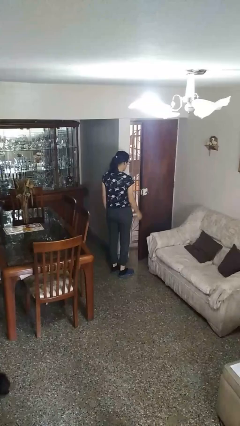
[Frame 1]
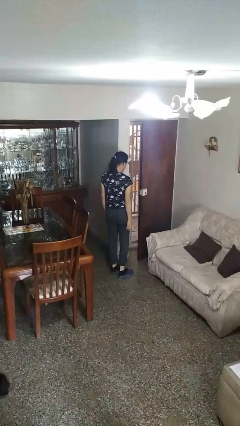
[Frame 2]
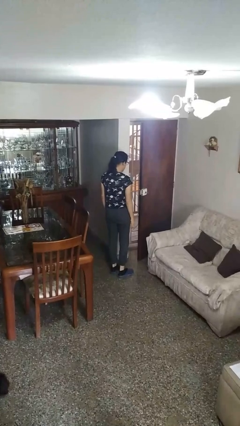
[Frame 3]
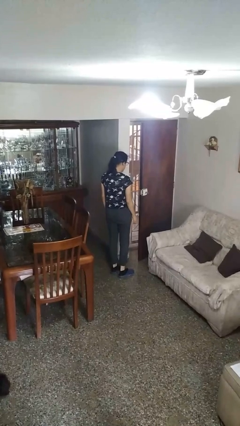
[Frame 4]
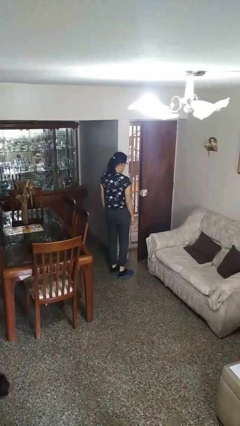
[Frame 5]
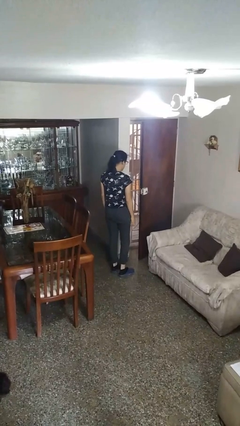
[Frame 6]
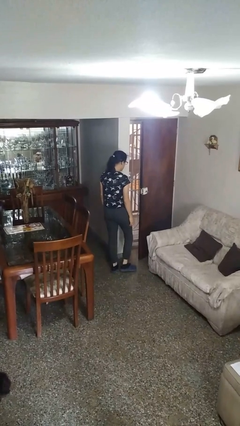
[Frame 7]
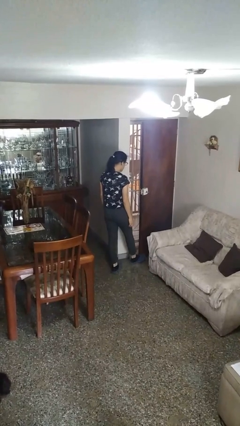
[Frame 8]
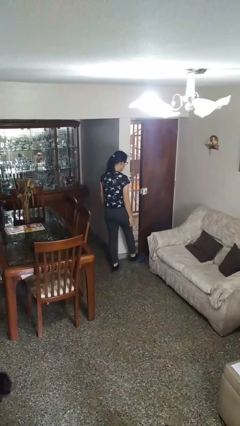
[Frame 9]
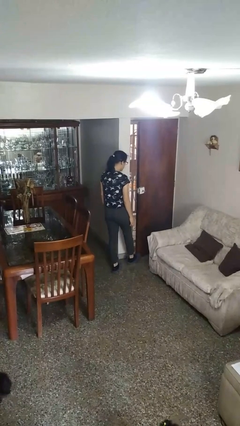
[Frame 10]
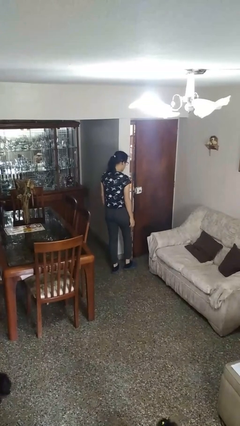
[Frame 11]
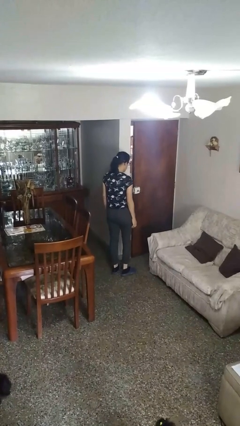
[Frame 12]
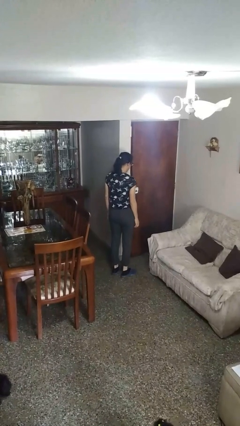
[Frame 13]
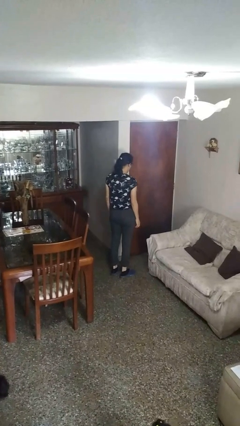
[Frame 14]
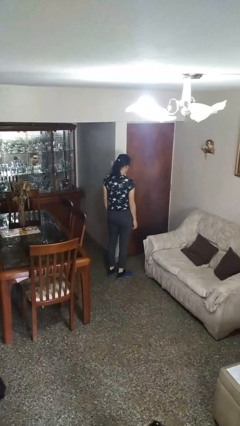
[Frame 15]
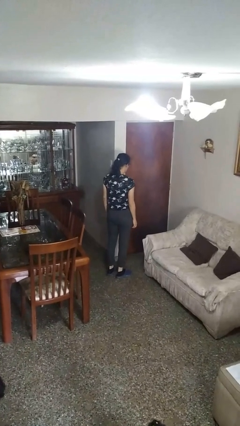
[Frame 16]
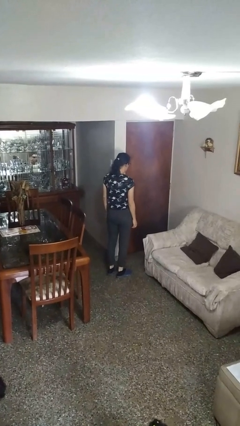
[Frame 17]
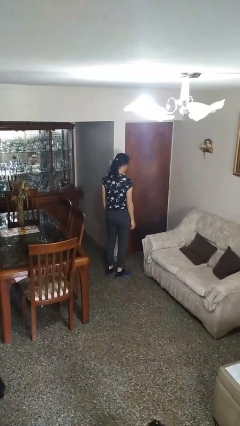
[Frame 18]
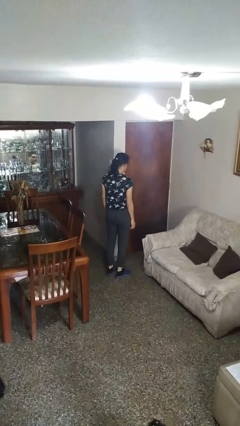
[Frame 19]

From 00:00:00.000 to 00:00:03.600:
person closes door with foot

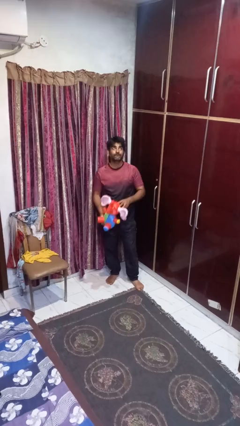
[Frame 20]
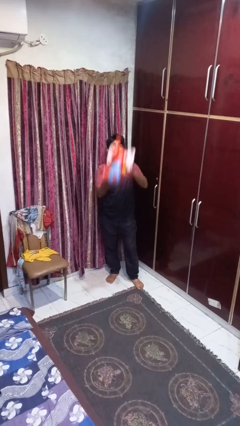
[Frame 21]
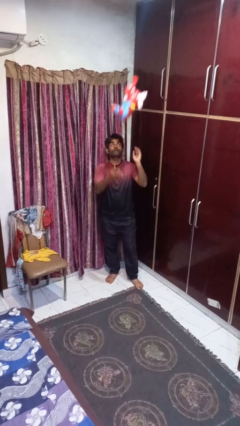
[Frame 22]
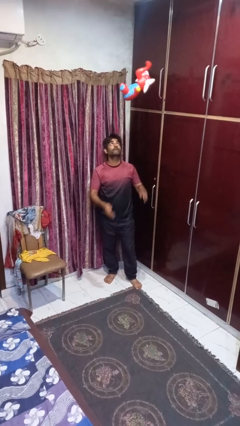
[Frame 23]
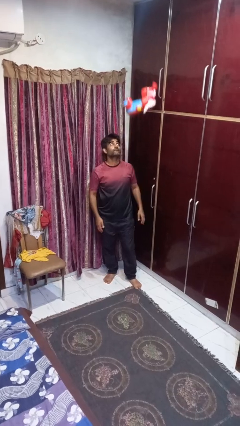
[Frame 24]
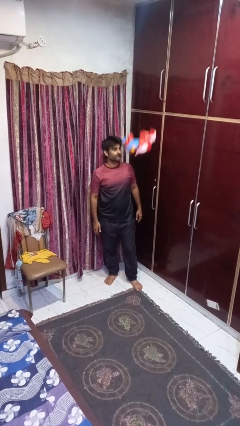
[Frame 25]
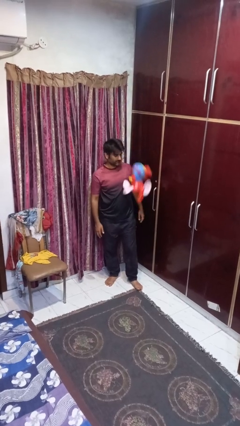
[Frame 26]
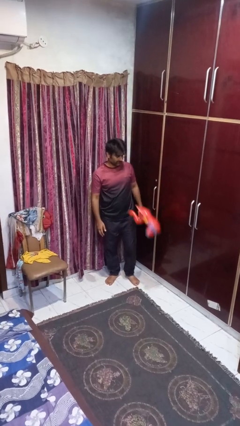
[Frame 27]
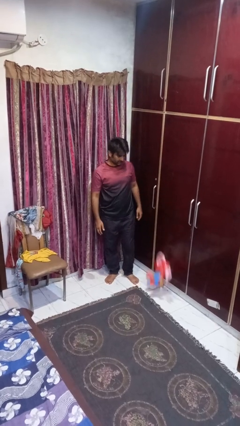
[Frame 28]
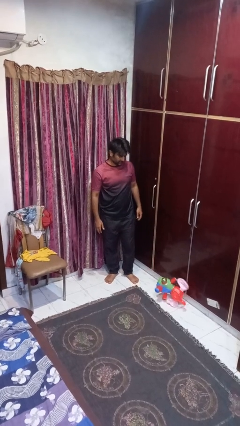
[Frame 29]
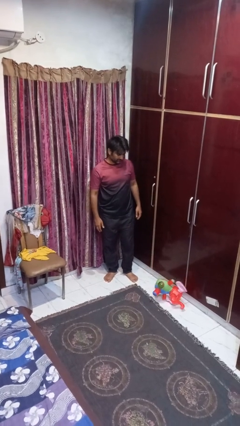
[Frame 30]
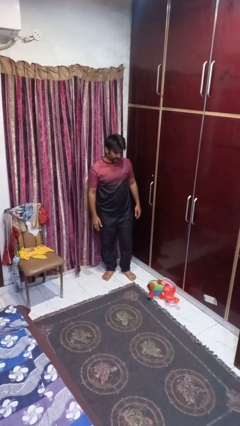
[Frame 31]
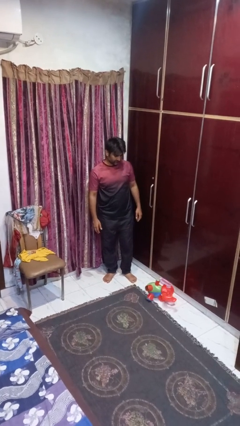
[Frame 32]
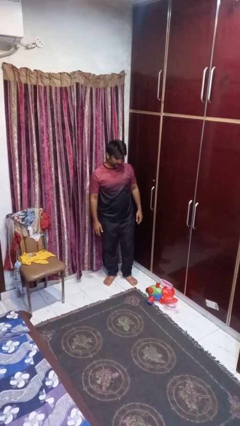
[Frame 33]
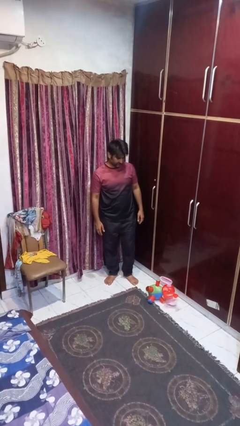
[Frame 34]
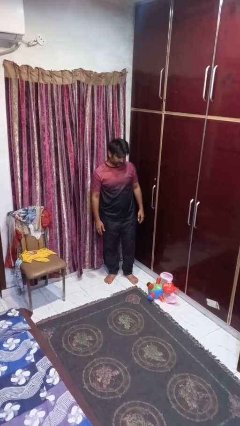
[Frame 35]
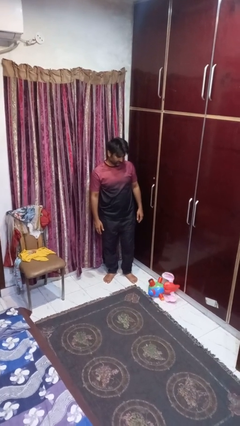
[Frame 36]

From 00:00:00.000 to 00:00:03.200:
person throws object into air

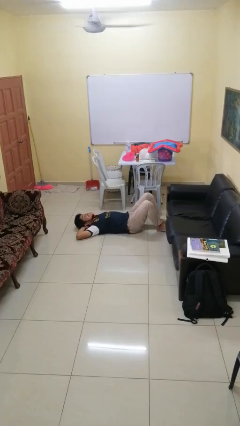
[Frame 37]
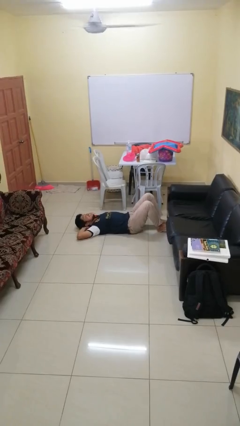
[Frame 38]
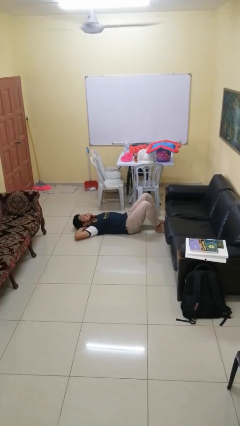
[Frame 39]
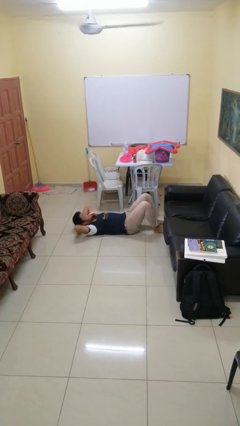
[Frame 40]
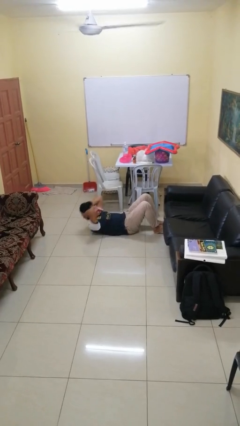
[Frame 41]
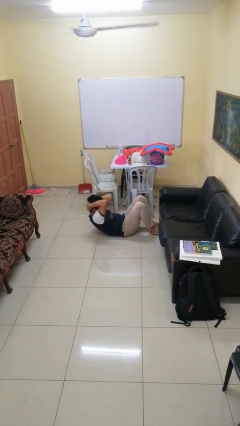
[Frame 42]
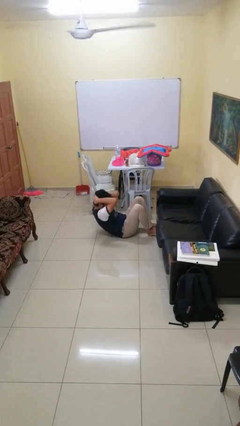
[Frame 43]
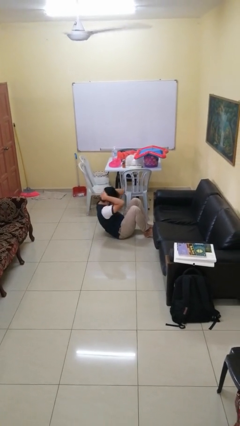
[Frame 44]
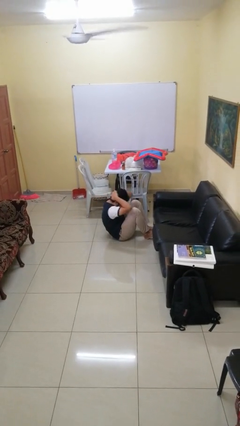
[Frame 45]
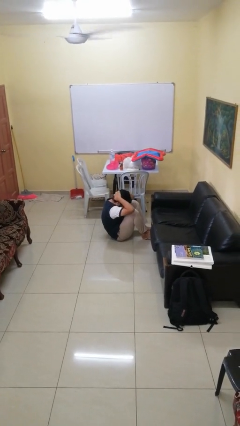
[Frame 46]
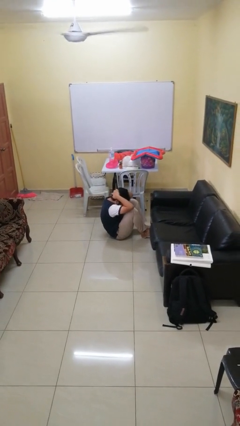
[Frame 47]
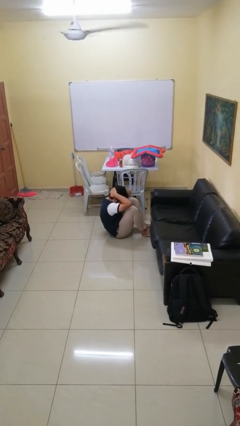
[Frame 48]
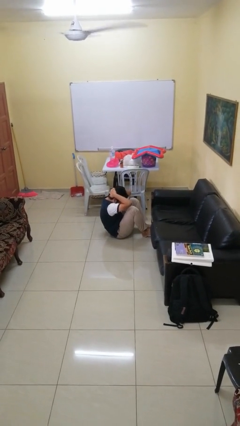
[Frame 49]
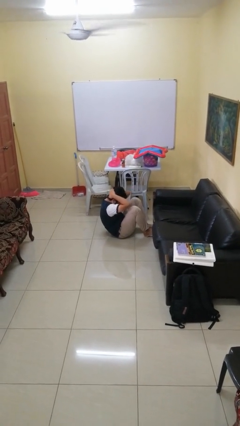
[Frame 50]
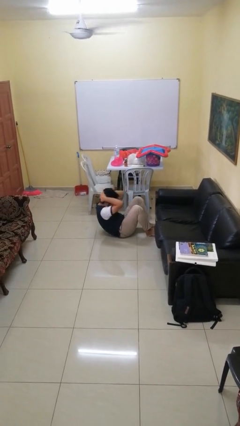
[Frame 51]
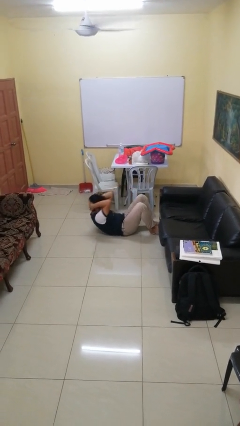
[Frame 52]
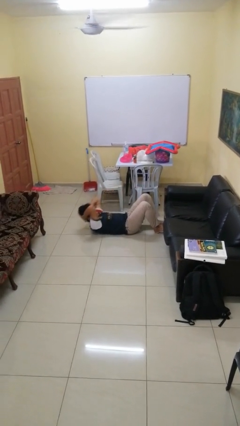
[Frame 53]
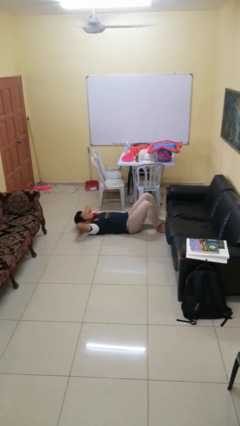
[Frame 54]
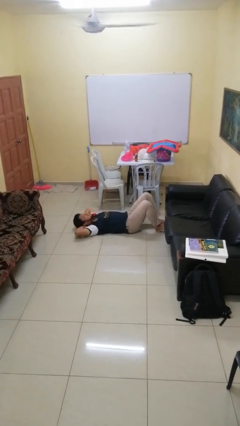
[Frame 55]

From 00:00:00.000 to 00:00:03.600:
person exercises with situp

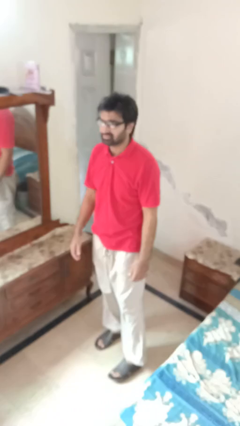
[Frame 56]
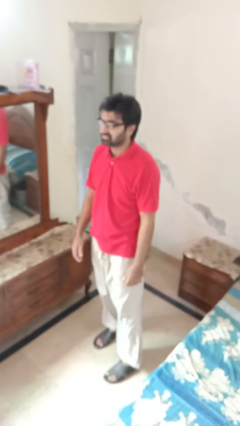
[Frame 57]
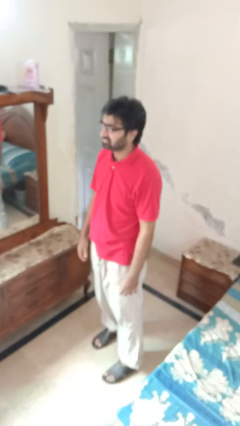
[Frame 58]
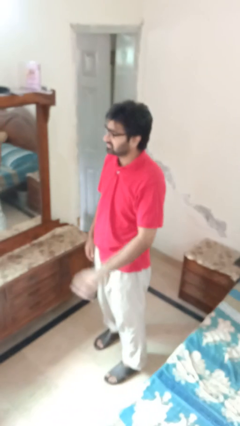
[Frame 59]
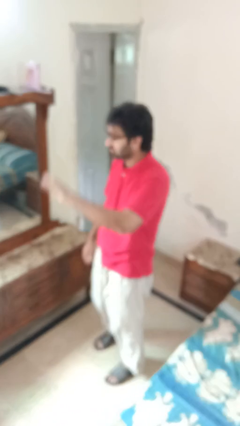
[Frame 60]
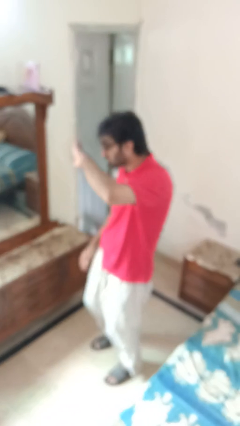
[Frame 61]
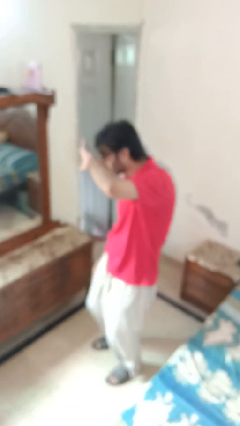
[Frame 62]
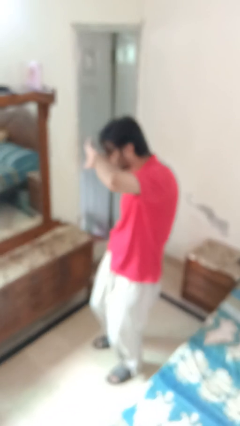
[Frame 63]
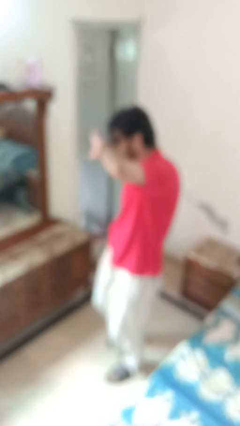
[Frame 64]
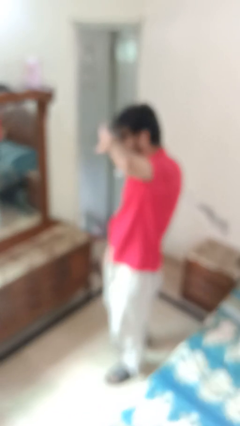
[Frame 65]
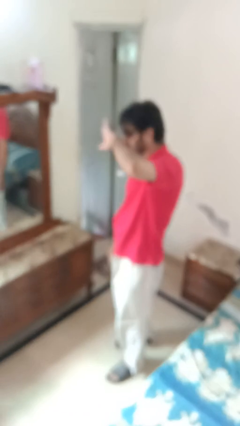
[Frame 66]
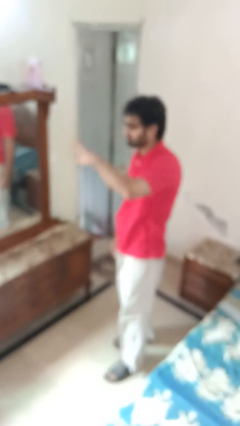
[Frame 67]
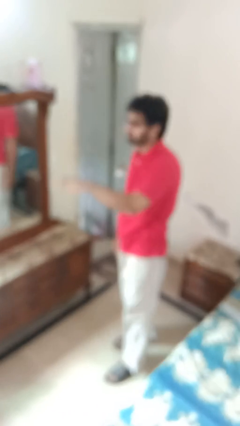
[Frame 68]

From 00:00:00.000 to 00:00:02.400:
person shades eyes

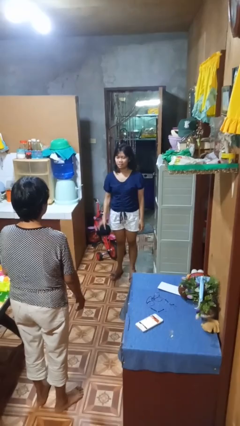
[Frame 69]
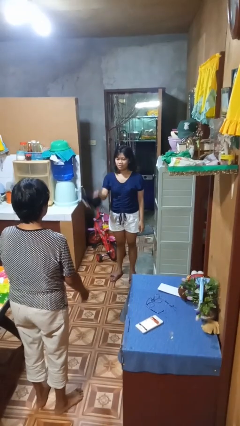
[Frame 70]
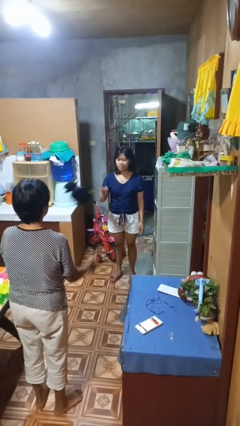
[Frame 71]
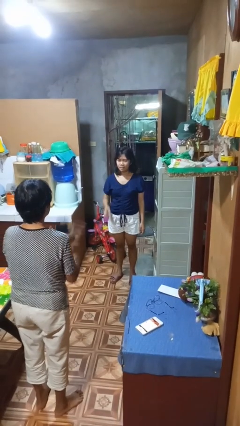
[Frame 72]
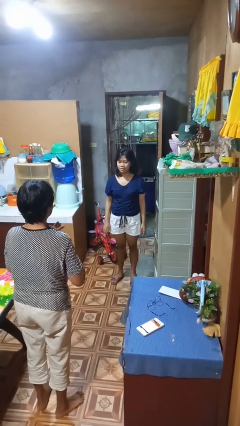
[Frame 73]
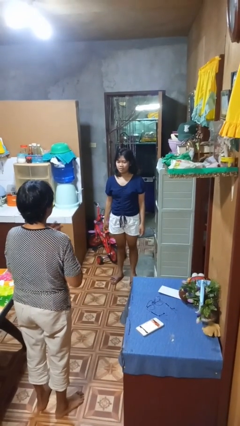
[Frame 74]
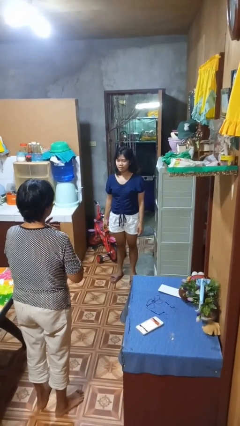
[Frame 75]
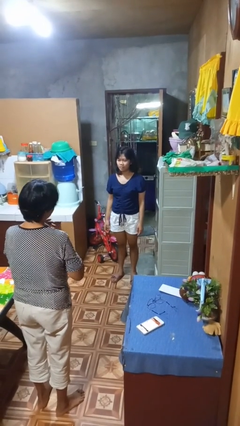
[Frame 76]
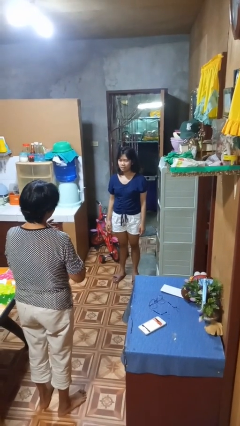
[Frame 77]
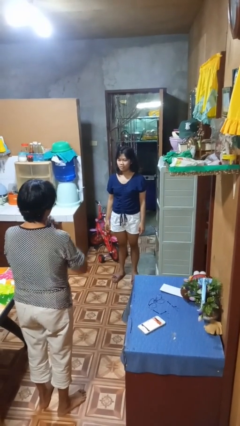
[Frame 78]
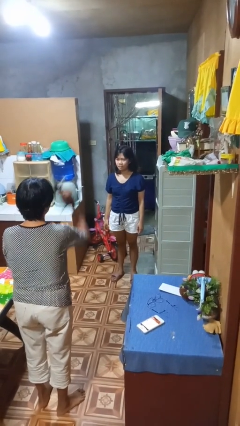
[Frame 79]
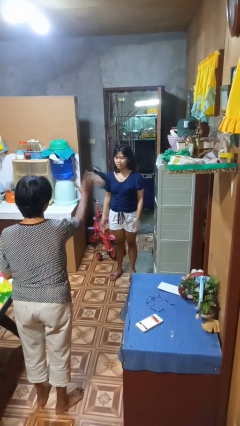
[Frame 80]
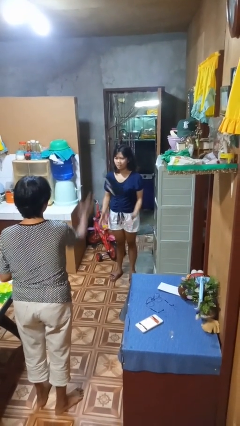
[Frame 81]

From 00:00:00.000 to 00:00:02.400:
person throws object to person

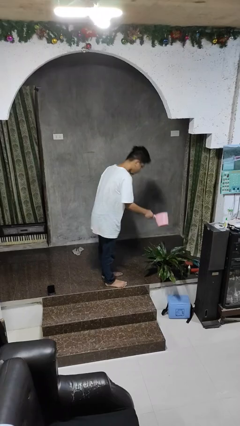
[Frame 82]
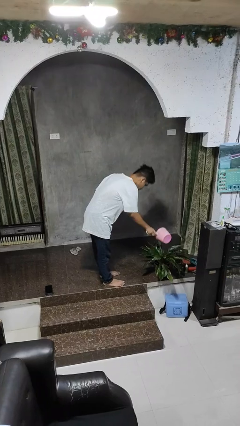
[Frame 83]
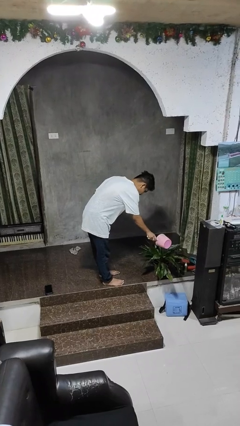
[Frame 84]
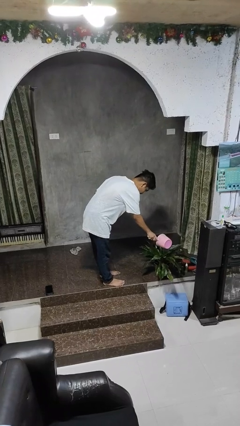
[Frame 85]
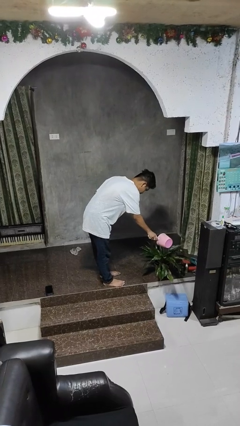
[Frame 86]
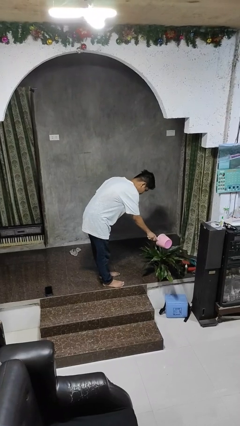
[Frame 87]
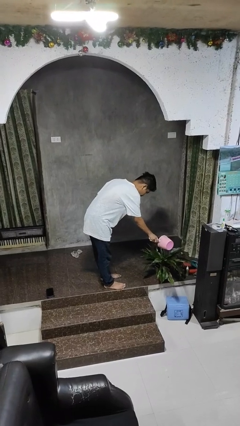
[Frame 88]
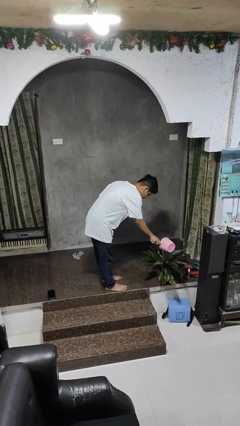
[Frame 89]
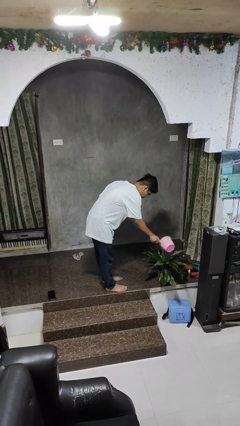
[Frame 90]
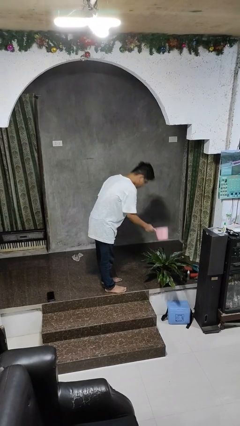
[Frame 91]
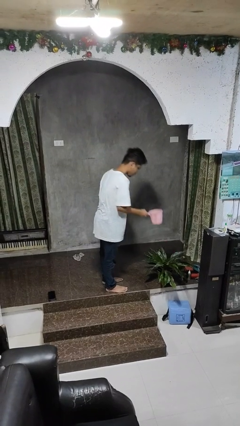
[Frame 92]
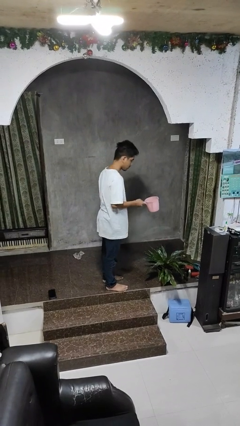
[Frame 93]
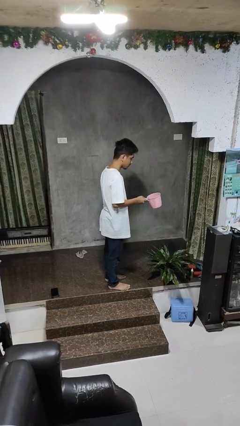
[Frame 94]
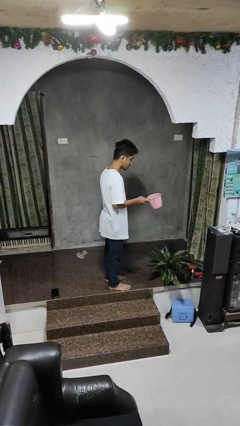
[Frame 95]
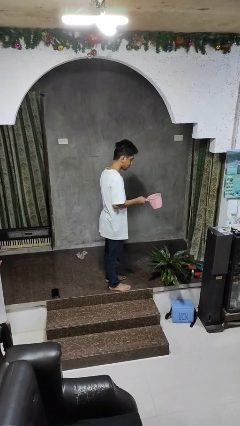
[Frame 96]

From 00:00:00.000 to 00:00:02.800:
person waters houseplant
